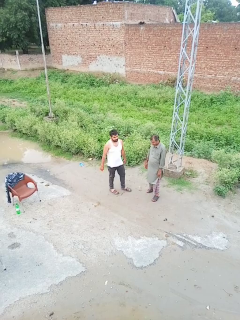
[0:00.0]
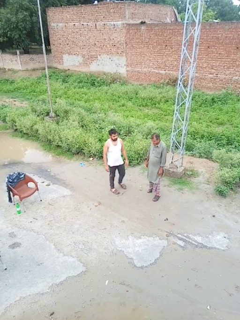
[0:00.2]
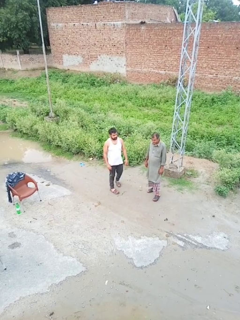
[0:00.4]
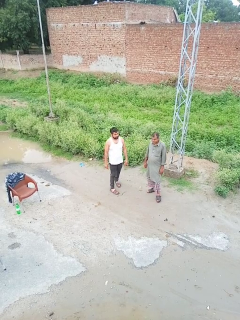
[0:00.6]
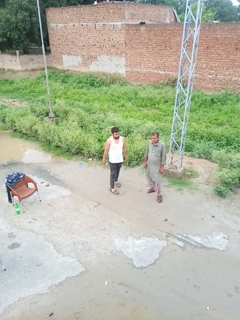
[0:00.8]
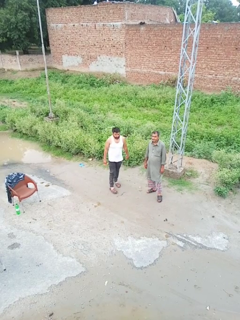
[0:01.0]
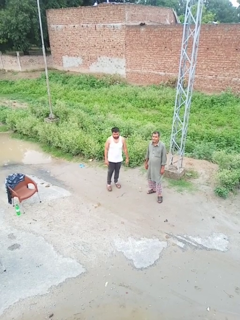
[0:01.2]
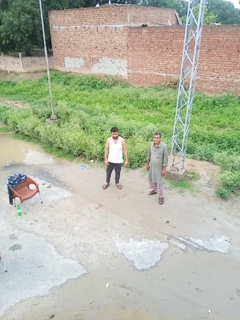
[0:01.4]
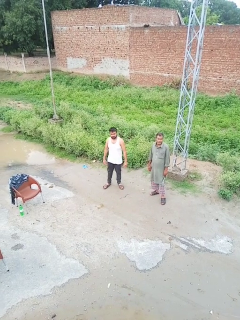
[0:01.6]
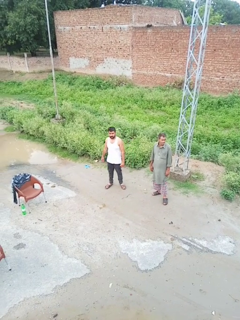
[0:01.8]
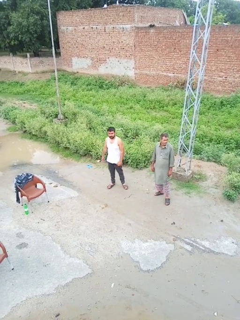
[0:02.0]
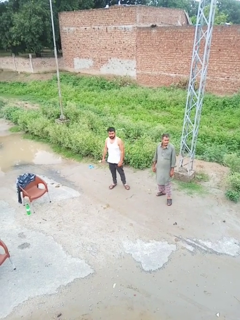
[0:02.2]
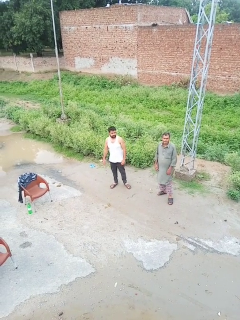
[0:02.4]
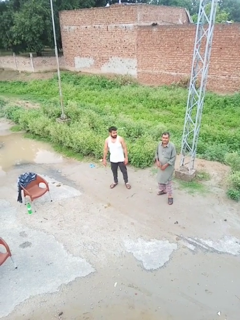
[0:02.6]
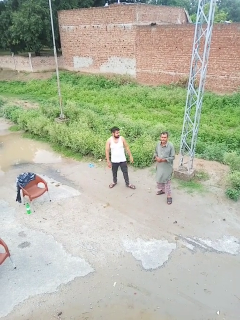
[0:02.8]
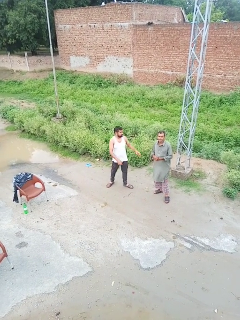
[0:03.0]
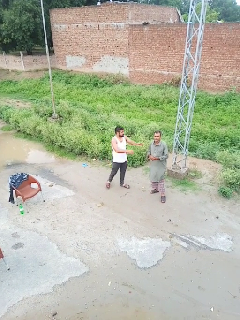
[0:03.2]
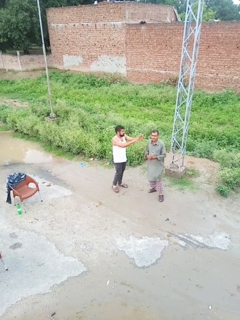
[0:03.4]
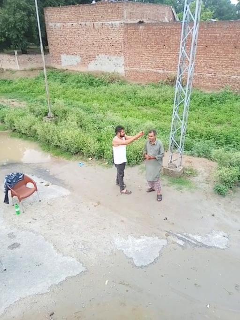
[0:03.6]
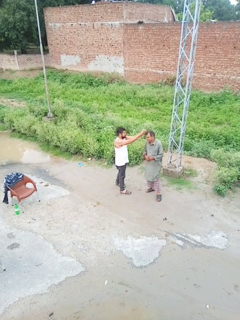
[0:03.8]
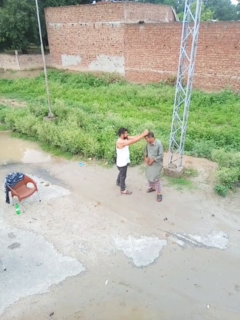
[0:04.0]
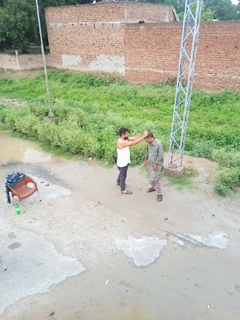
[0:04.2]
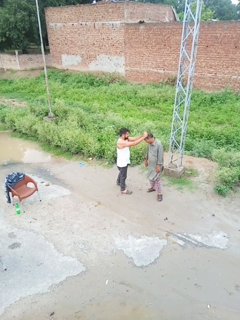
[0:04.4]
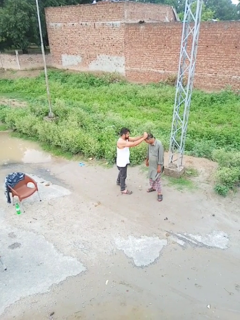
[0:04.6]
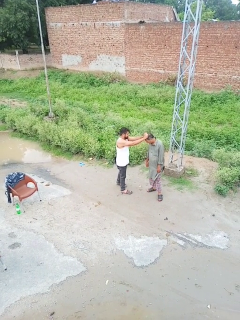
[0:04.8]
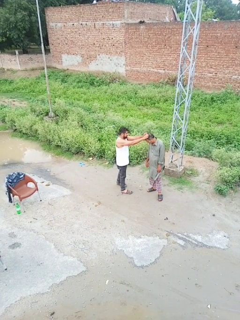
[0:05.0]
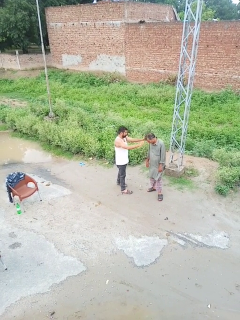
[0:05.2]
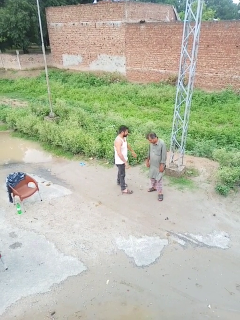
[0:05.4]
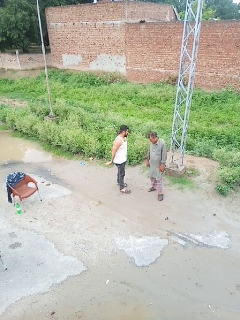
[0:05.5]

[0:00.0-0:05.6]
person grabs person by hair

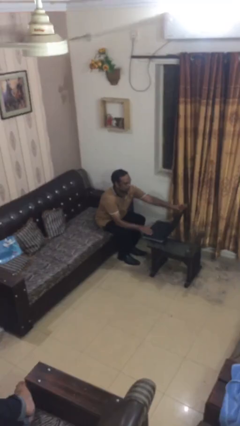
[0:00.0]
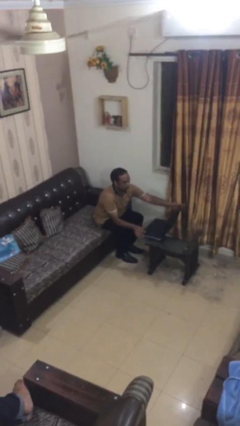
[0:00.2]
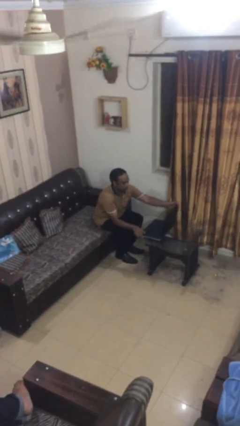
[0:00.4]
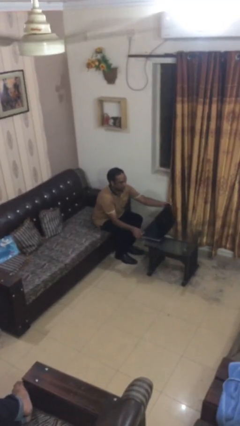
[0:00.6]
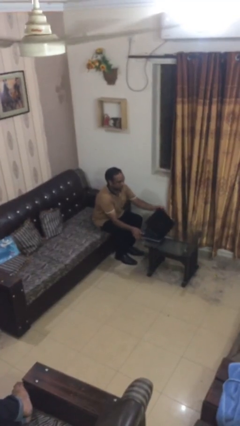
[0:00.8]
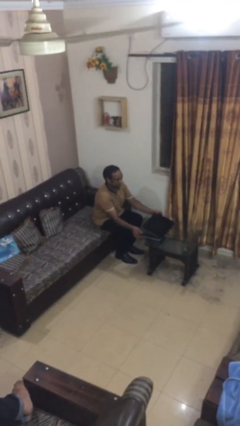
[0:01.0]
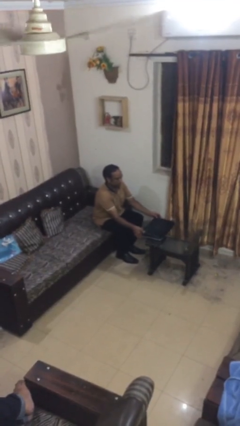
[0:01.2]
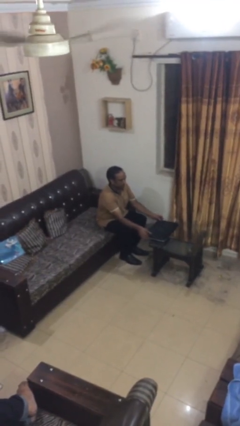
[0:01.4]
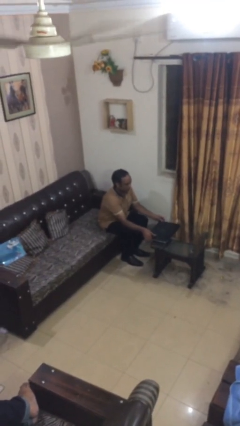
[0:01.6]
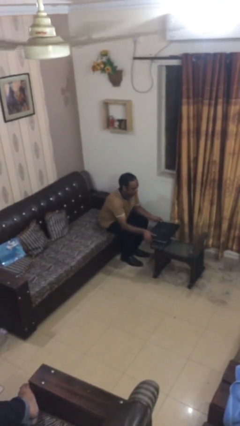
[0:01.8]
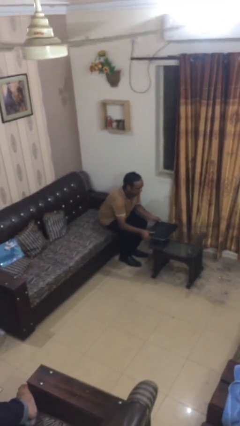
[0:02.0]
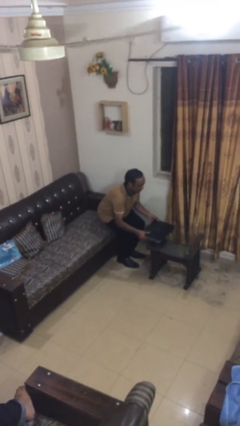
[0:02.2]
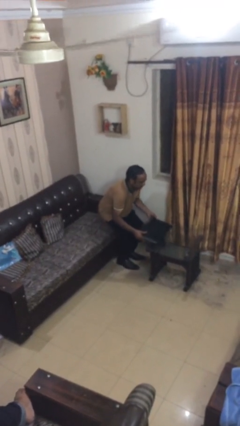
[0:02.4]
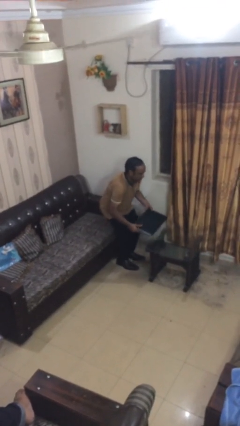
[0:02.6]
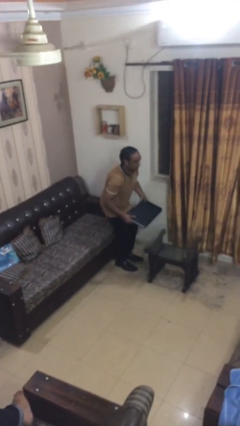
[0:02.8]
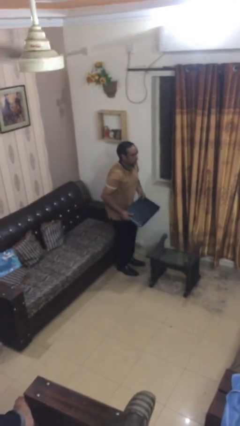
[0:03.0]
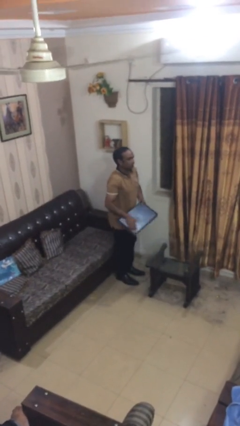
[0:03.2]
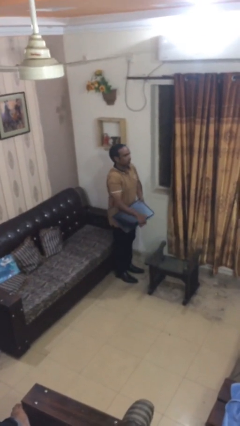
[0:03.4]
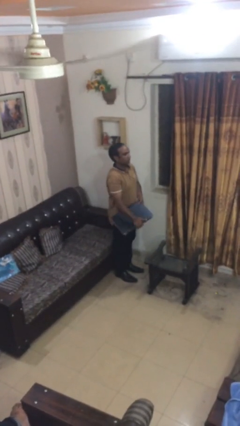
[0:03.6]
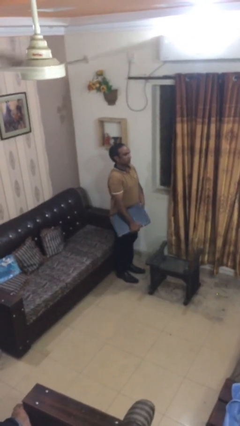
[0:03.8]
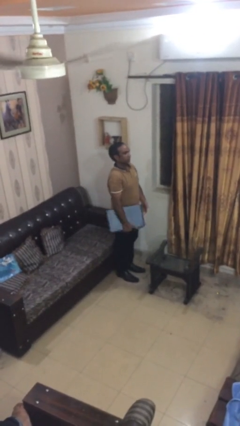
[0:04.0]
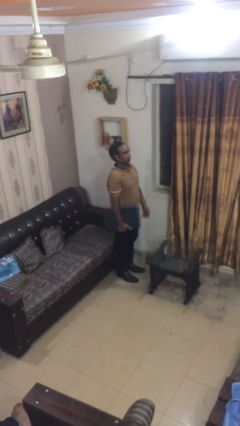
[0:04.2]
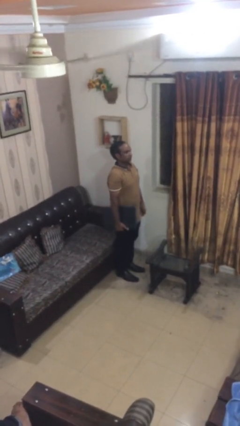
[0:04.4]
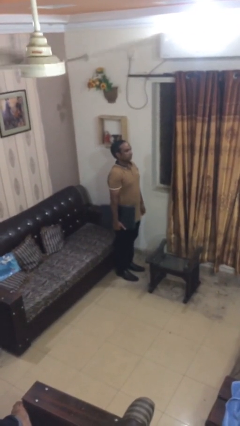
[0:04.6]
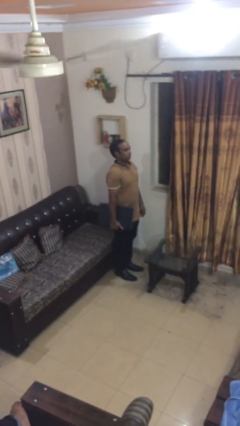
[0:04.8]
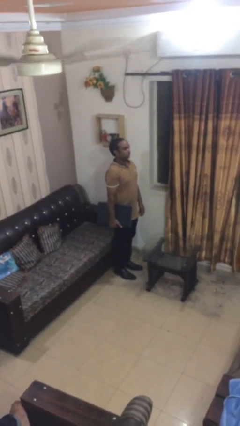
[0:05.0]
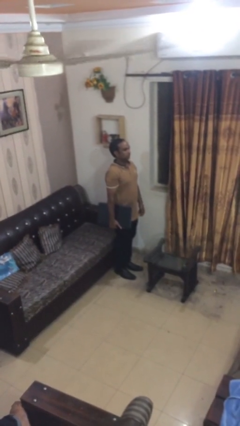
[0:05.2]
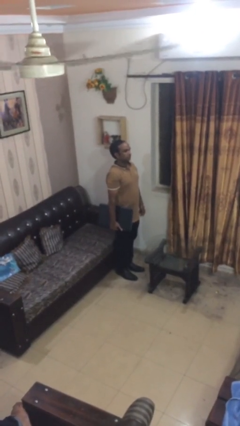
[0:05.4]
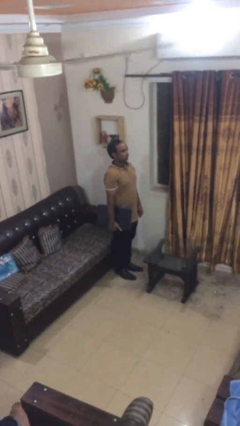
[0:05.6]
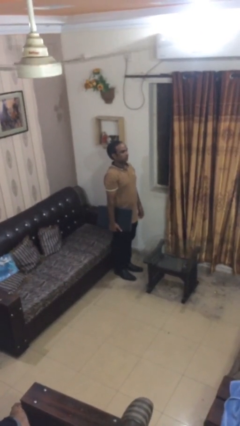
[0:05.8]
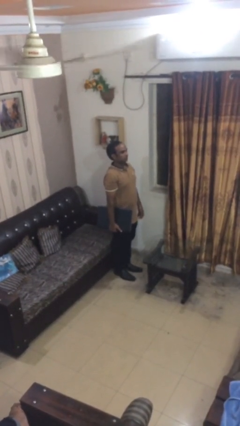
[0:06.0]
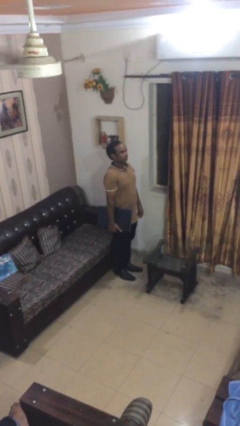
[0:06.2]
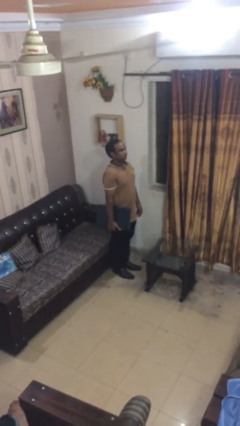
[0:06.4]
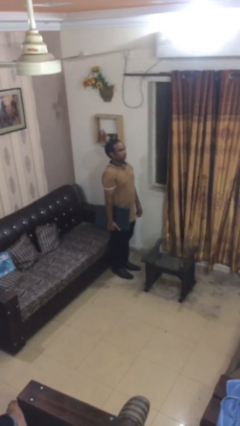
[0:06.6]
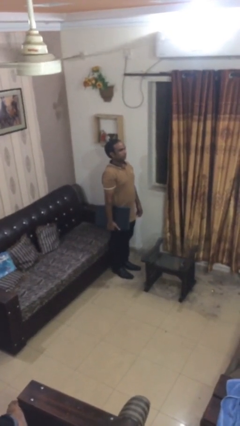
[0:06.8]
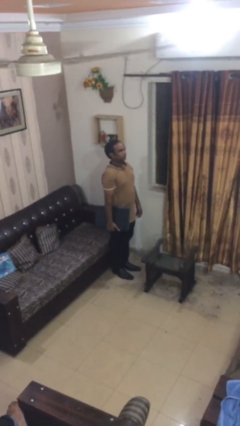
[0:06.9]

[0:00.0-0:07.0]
person stands up

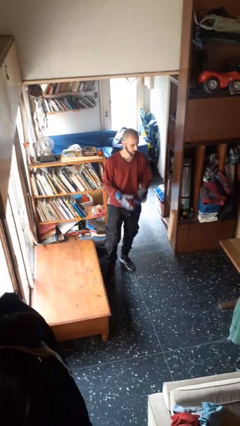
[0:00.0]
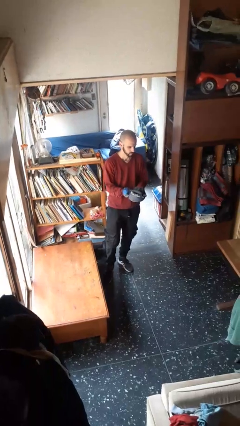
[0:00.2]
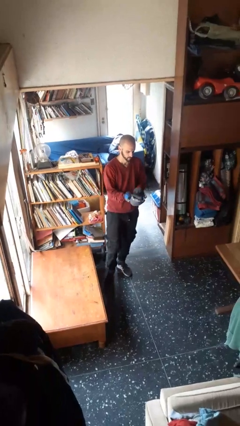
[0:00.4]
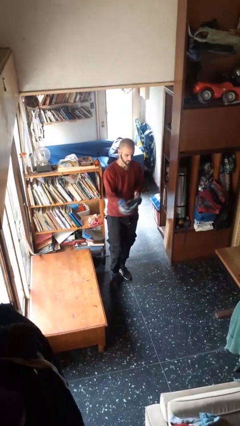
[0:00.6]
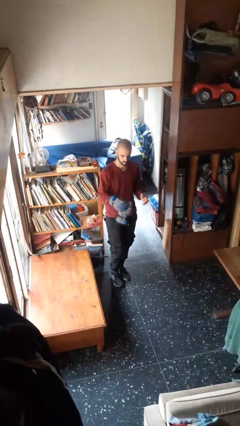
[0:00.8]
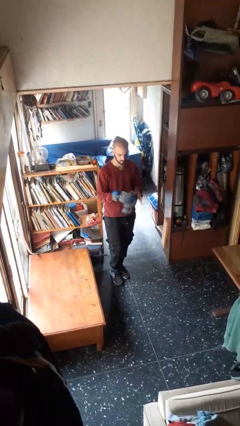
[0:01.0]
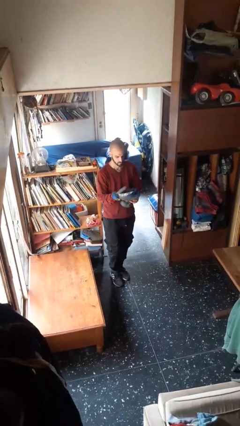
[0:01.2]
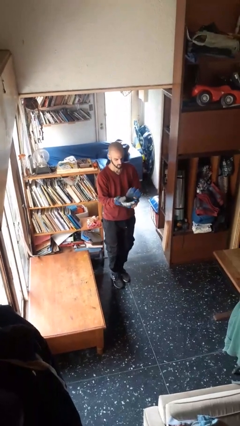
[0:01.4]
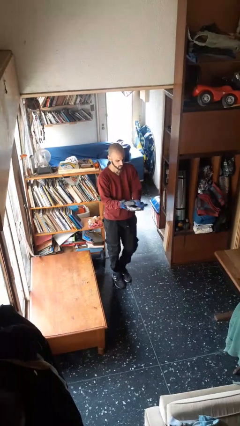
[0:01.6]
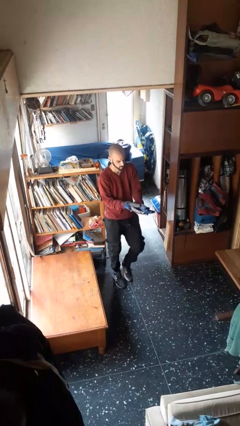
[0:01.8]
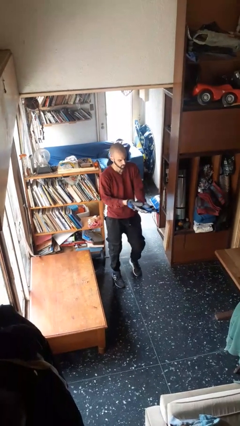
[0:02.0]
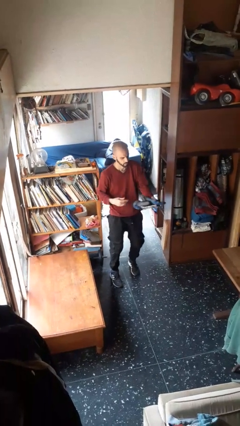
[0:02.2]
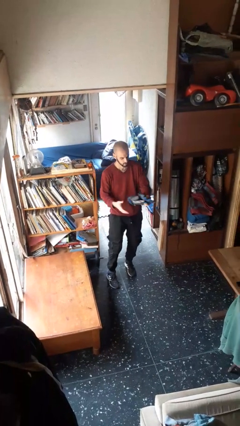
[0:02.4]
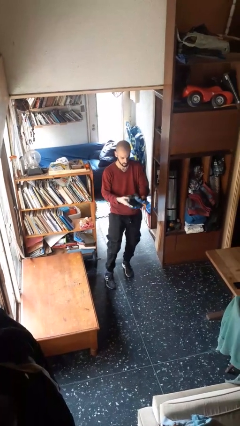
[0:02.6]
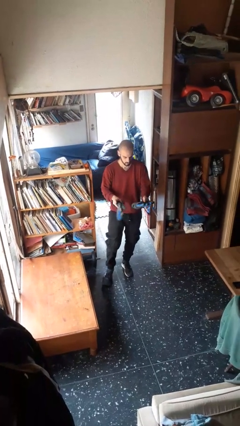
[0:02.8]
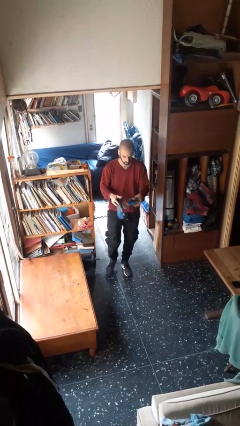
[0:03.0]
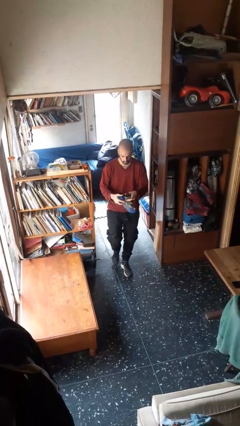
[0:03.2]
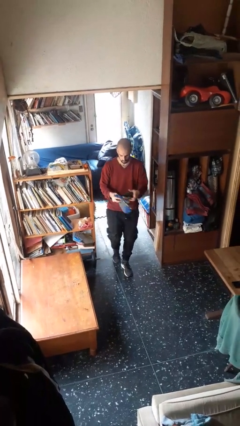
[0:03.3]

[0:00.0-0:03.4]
person takes off gloves

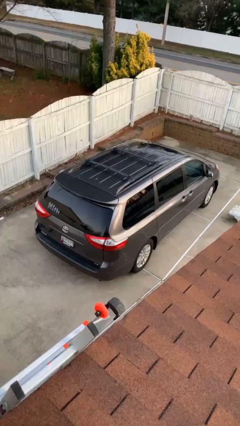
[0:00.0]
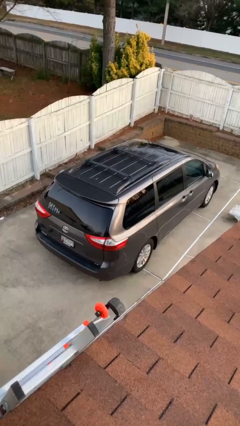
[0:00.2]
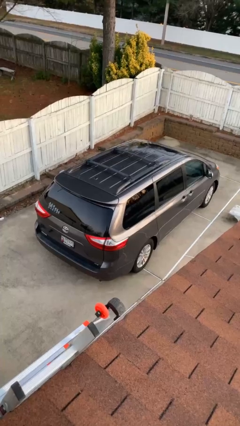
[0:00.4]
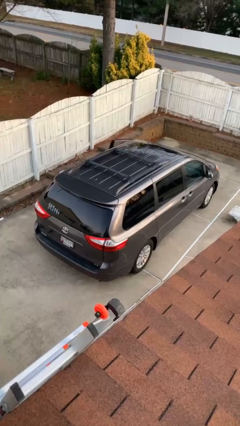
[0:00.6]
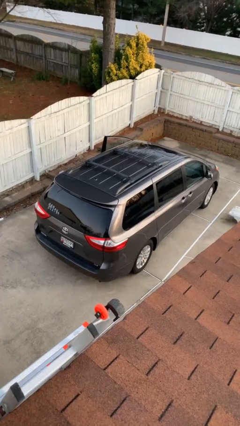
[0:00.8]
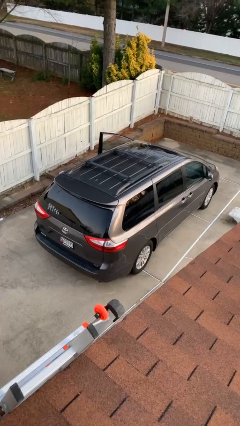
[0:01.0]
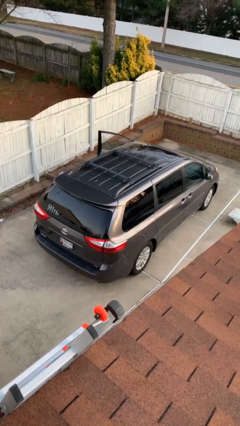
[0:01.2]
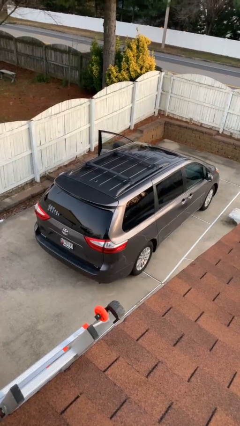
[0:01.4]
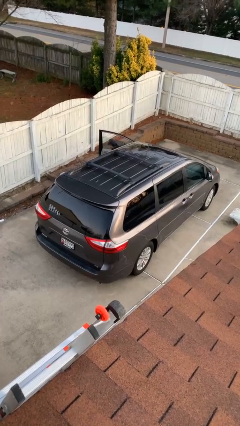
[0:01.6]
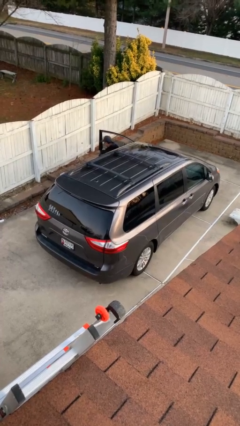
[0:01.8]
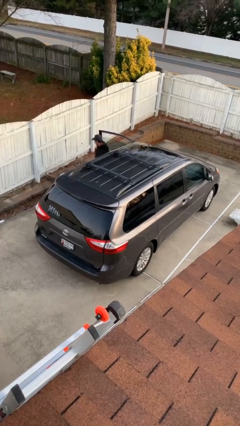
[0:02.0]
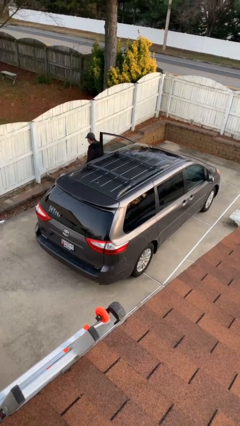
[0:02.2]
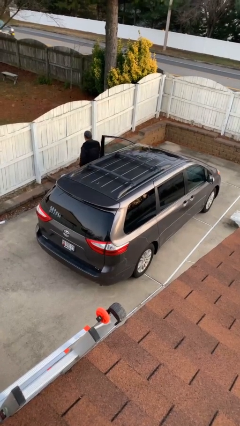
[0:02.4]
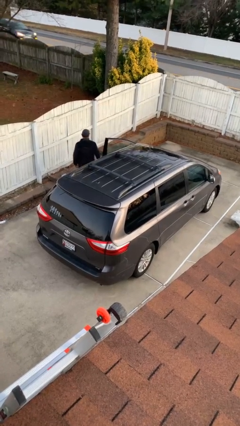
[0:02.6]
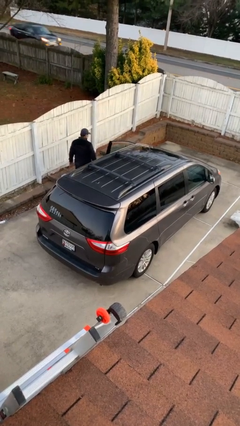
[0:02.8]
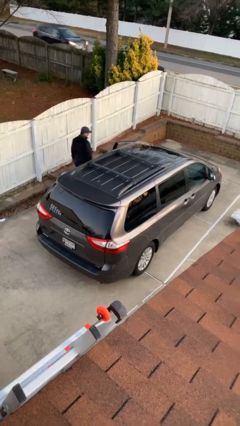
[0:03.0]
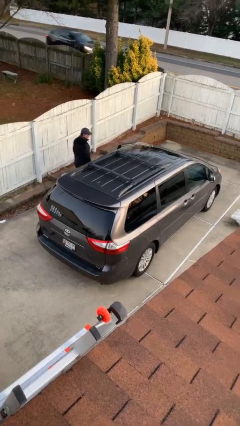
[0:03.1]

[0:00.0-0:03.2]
car drops off person
